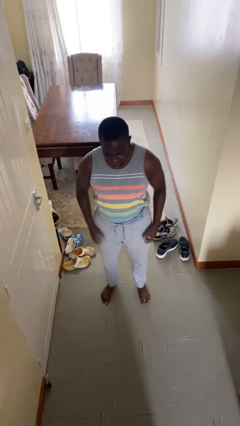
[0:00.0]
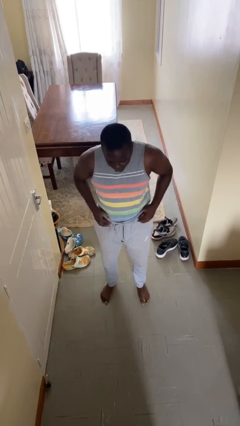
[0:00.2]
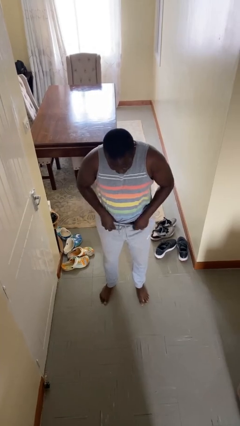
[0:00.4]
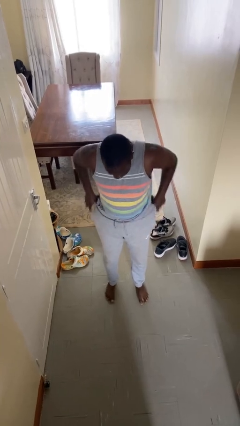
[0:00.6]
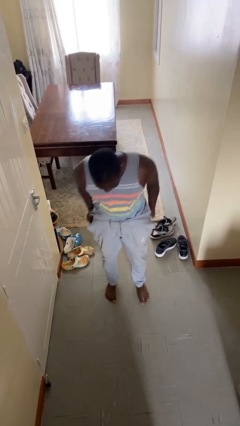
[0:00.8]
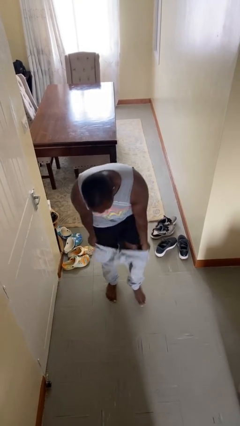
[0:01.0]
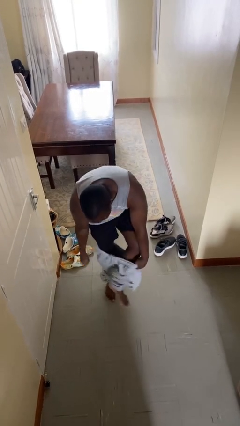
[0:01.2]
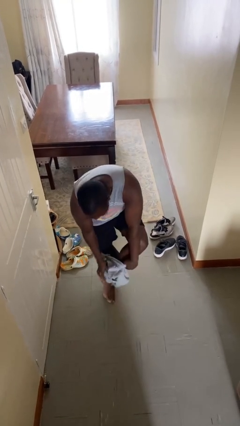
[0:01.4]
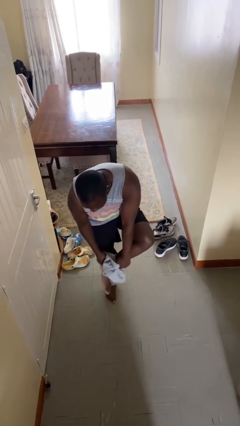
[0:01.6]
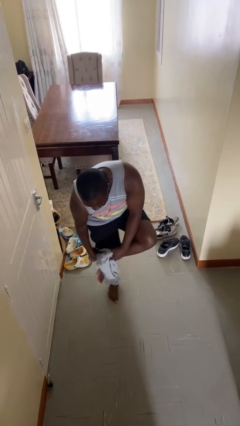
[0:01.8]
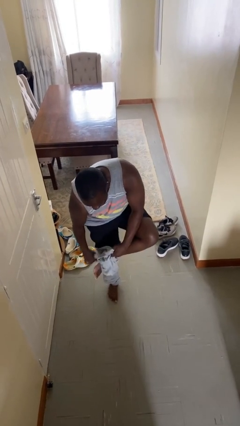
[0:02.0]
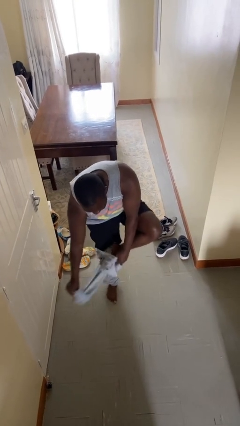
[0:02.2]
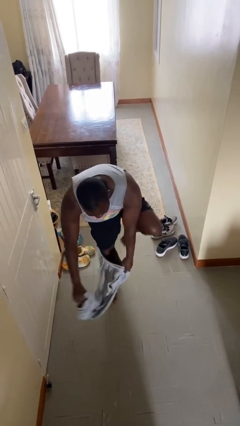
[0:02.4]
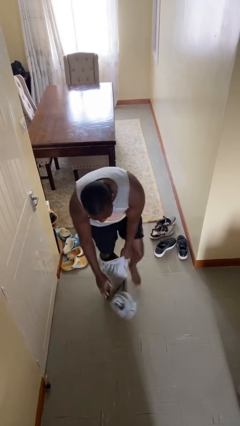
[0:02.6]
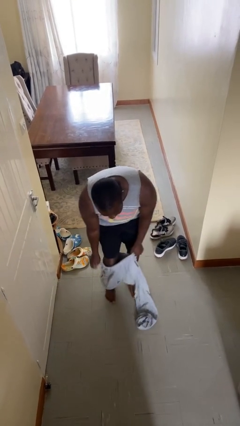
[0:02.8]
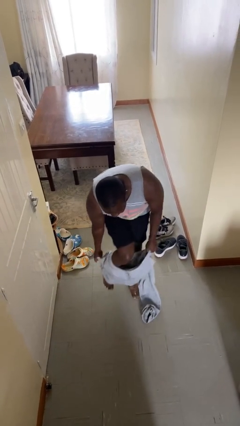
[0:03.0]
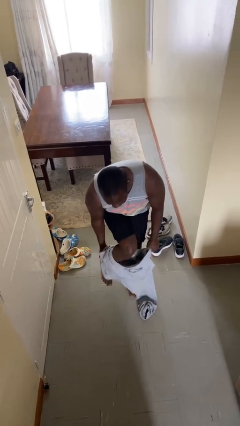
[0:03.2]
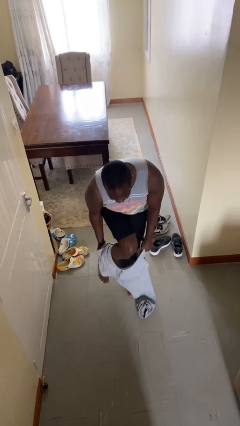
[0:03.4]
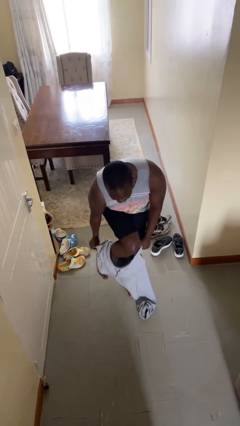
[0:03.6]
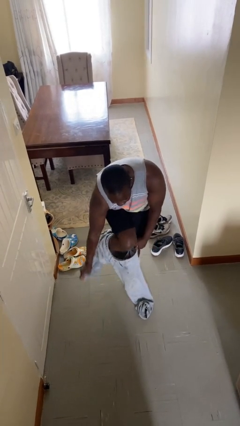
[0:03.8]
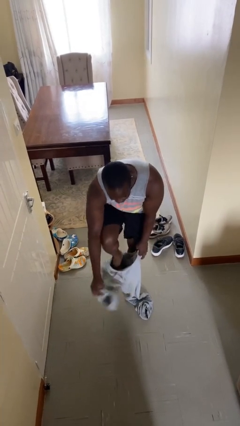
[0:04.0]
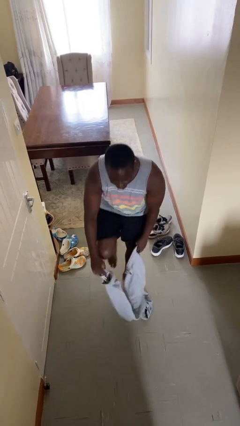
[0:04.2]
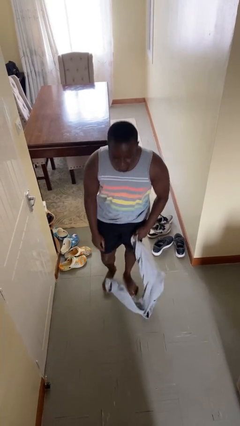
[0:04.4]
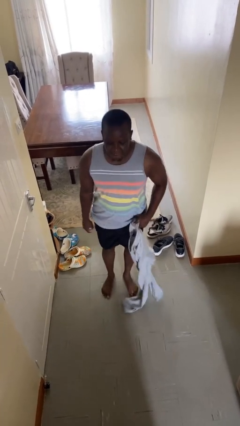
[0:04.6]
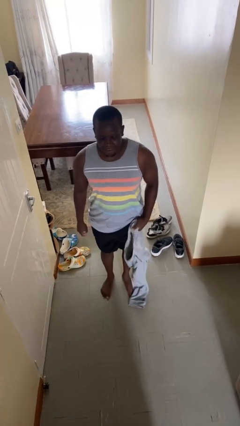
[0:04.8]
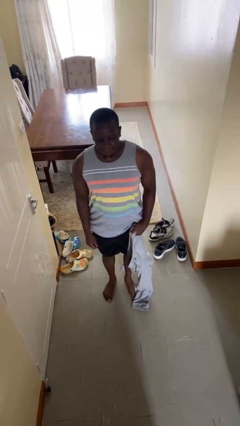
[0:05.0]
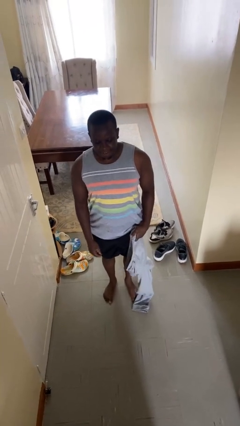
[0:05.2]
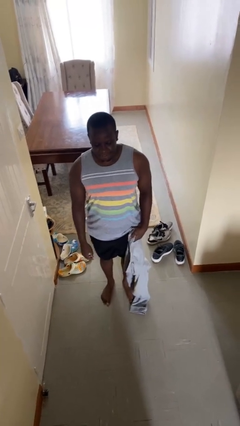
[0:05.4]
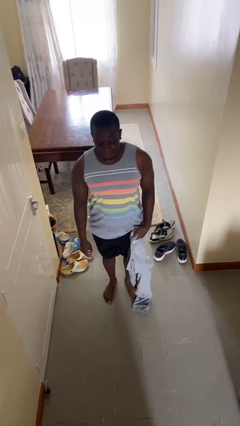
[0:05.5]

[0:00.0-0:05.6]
person takes off pants

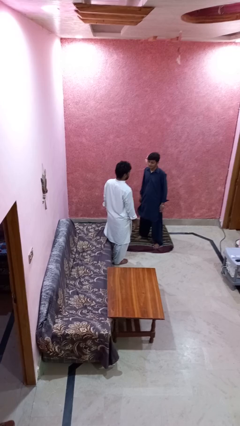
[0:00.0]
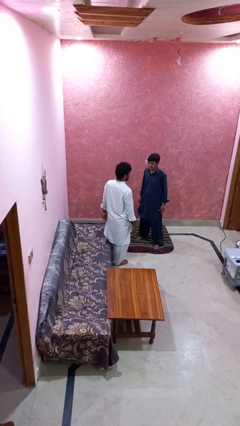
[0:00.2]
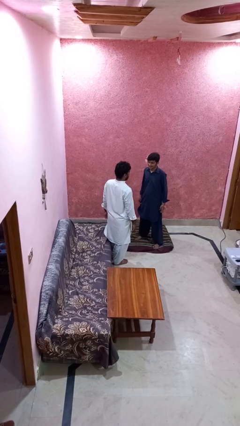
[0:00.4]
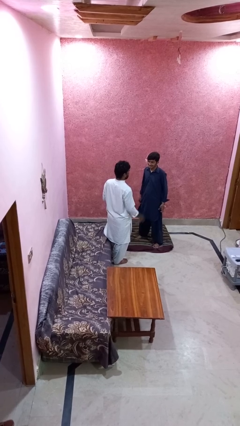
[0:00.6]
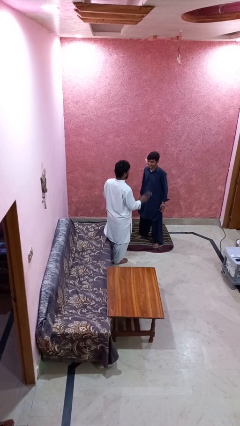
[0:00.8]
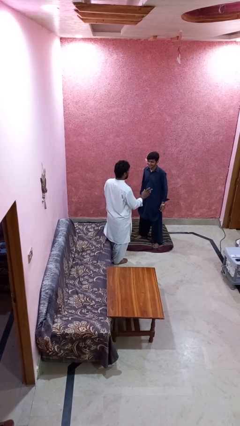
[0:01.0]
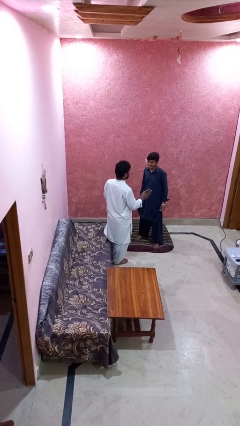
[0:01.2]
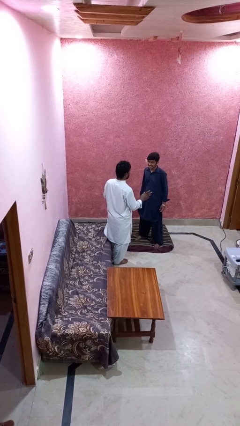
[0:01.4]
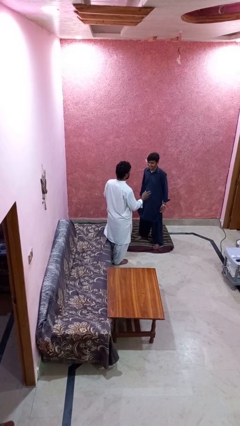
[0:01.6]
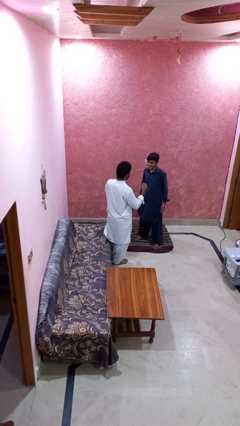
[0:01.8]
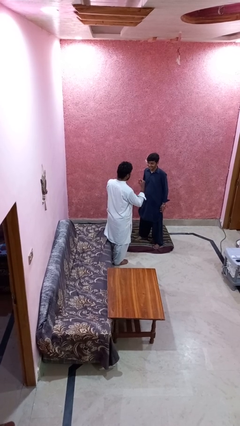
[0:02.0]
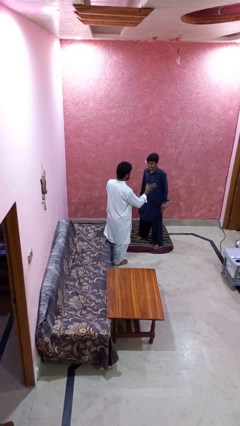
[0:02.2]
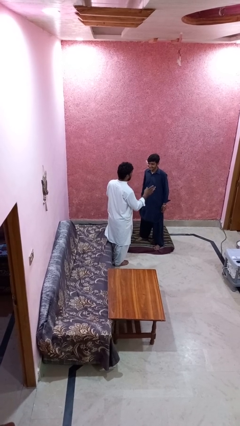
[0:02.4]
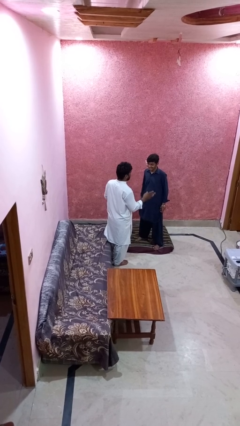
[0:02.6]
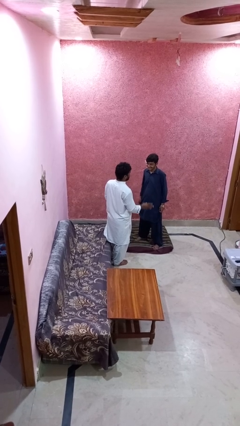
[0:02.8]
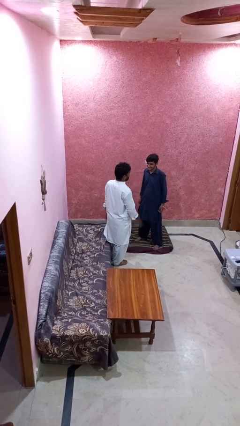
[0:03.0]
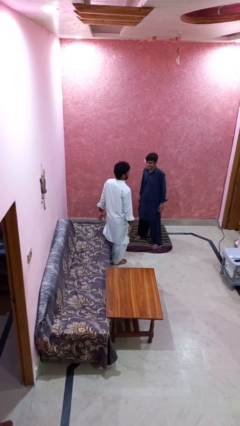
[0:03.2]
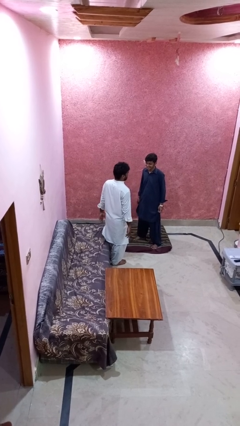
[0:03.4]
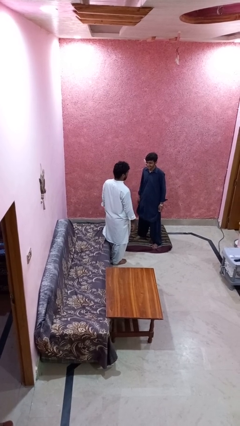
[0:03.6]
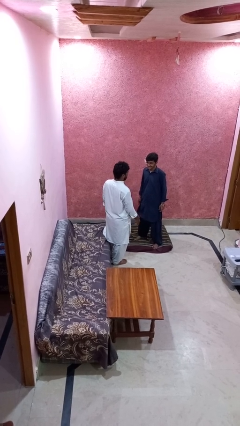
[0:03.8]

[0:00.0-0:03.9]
person laughs with person

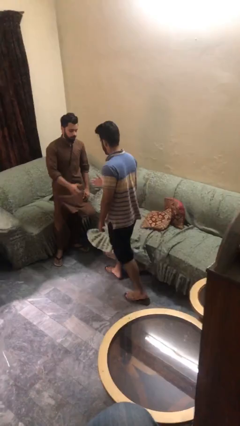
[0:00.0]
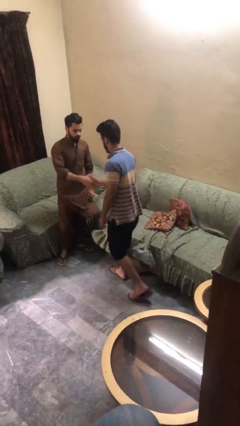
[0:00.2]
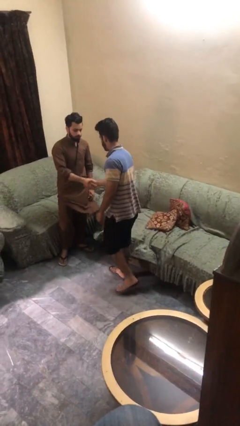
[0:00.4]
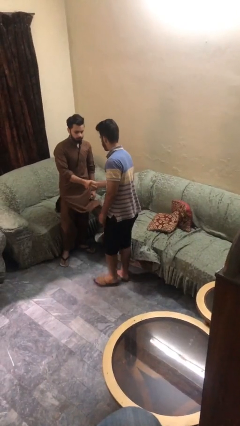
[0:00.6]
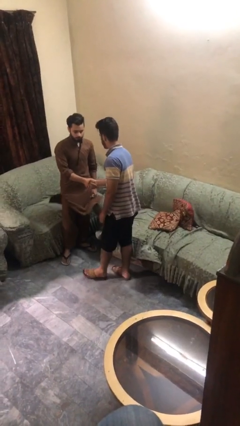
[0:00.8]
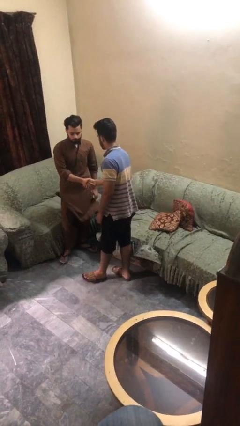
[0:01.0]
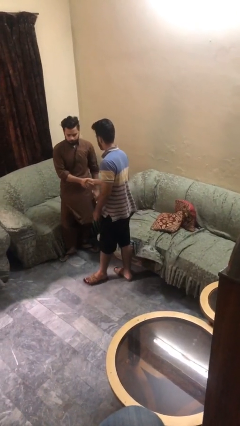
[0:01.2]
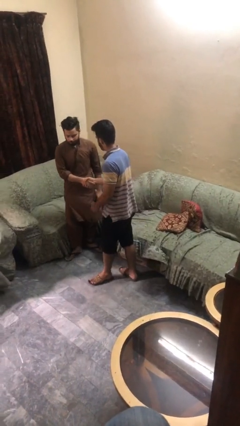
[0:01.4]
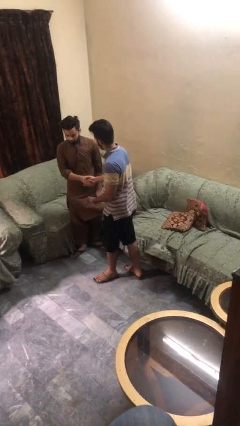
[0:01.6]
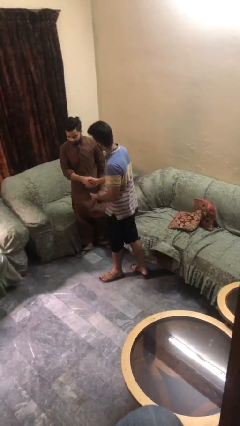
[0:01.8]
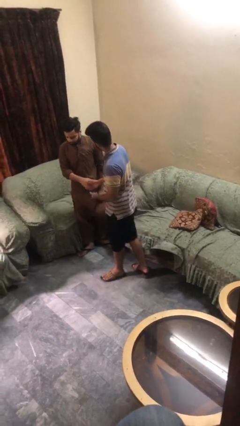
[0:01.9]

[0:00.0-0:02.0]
person shakes hand

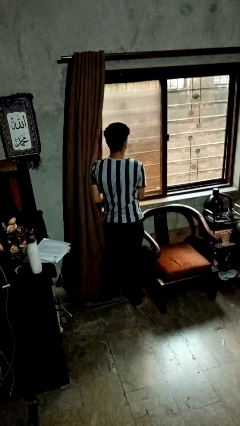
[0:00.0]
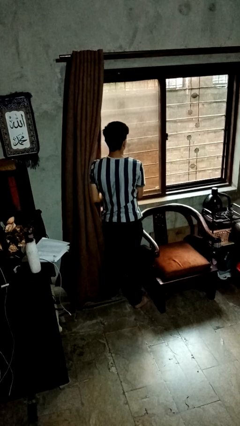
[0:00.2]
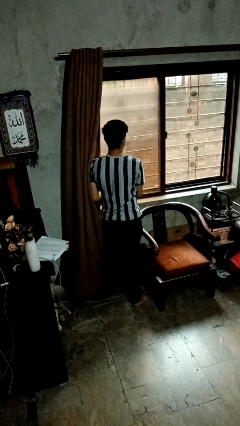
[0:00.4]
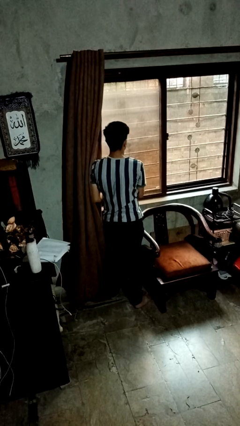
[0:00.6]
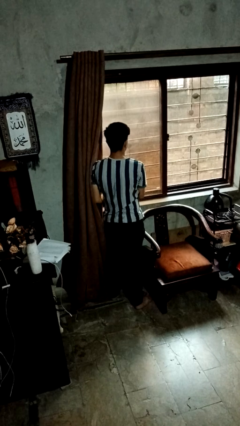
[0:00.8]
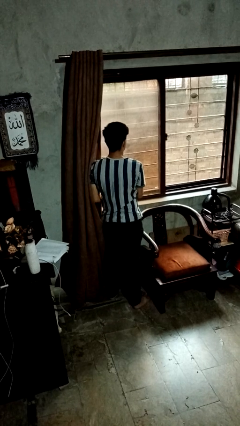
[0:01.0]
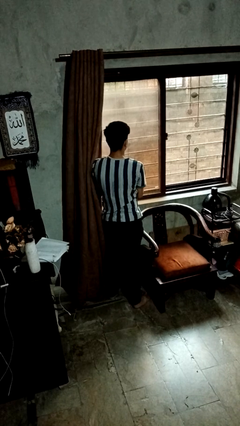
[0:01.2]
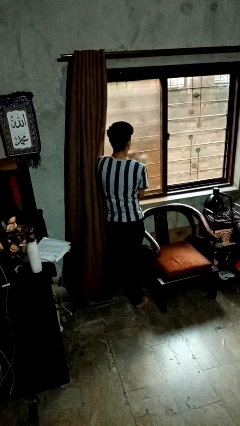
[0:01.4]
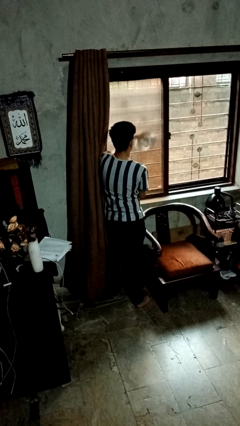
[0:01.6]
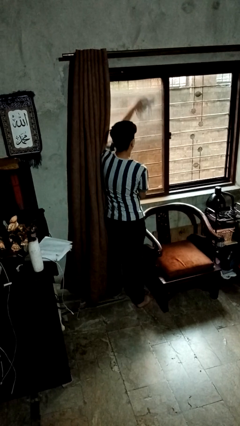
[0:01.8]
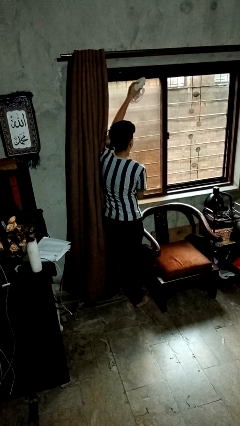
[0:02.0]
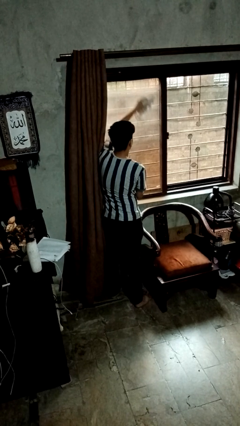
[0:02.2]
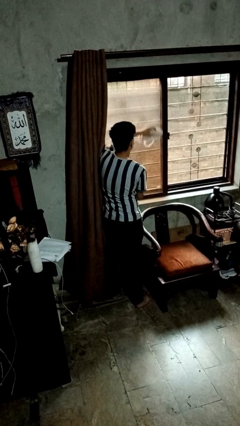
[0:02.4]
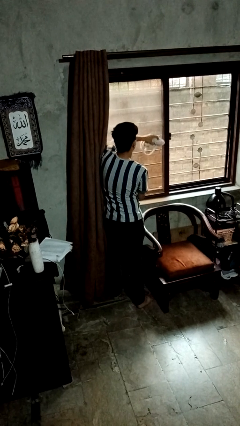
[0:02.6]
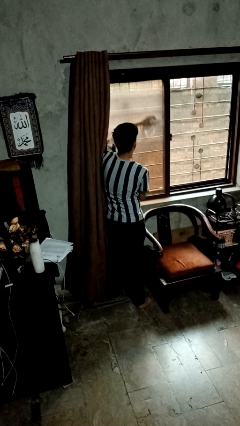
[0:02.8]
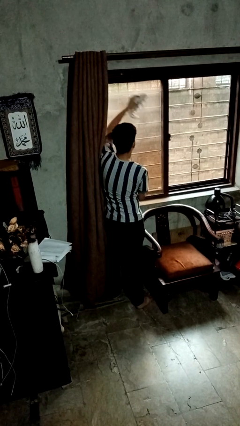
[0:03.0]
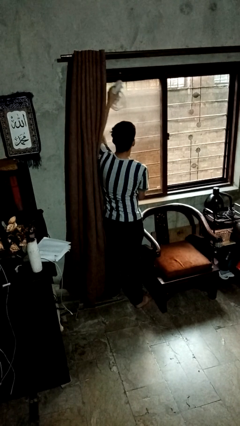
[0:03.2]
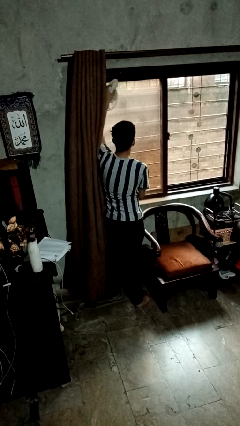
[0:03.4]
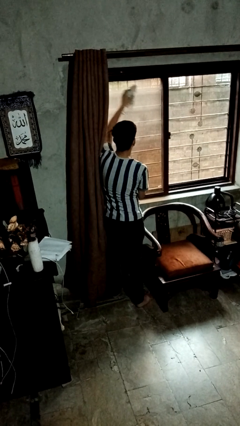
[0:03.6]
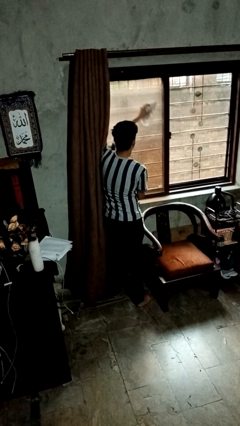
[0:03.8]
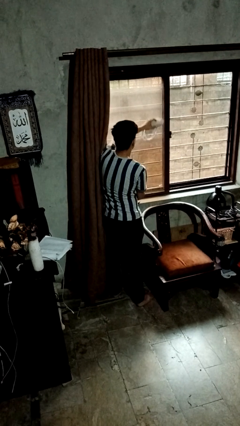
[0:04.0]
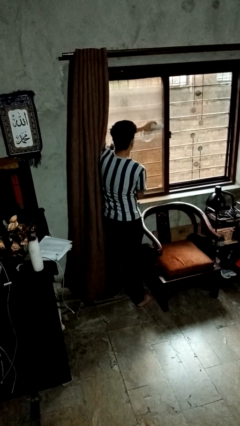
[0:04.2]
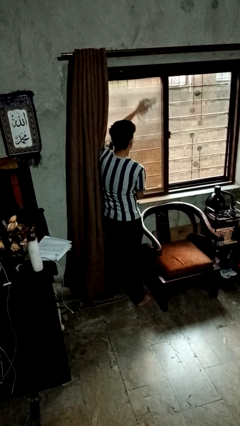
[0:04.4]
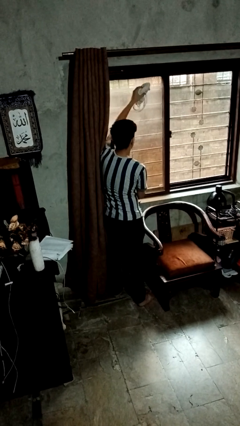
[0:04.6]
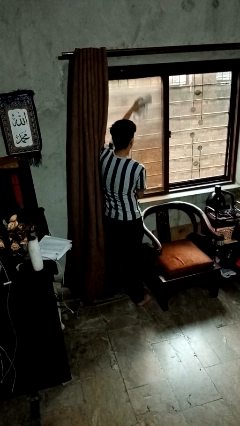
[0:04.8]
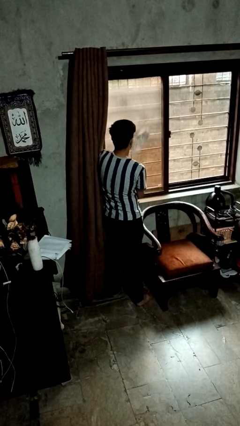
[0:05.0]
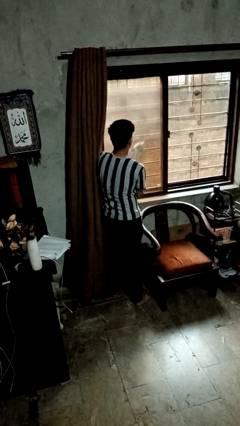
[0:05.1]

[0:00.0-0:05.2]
person washes window

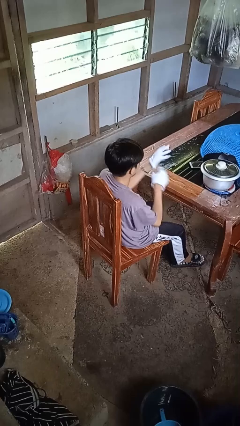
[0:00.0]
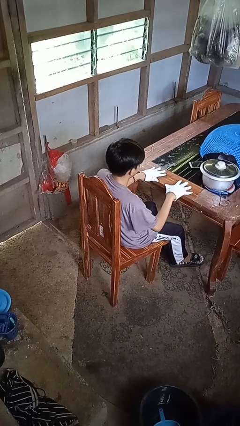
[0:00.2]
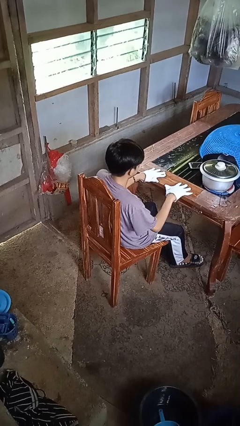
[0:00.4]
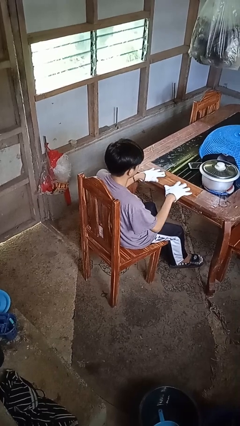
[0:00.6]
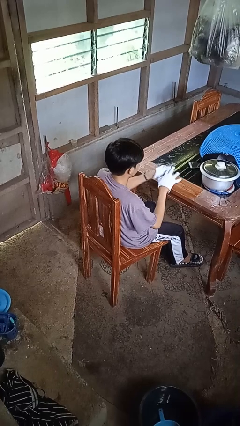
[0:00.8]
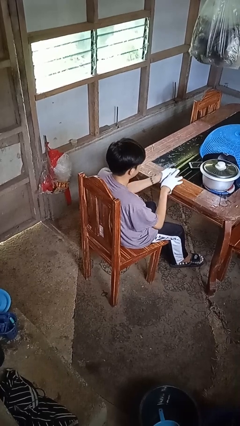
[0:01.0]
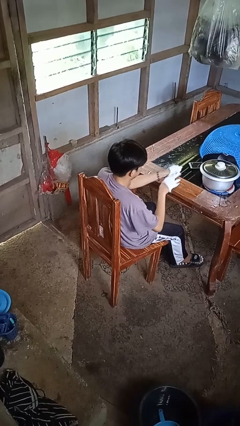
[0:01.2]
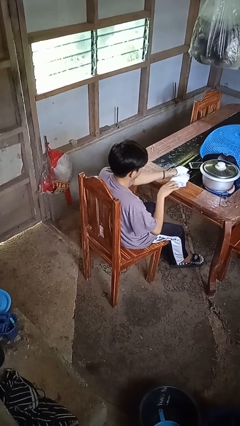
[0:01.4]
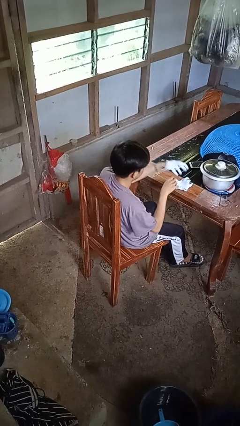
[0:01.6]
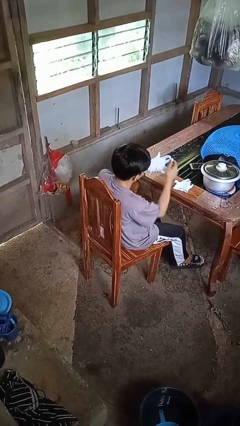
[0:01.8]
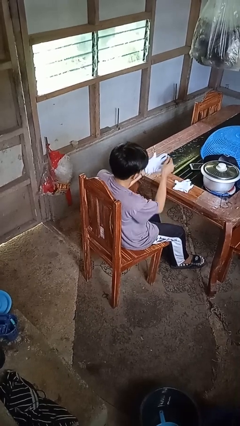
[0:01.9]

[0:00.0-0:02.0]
person takes off gloves
